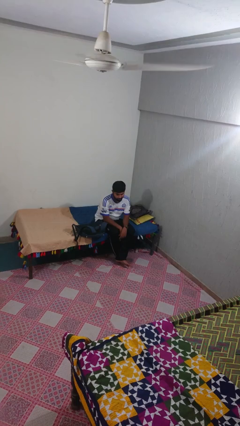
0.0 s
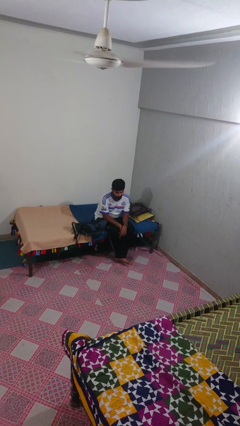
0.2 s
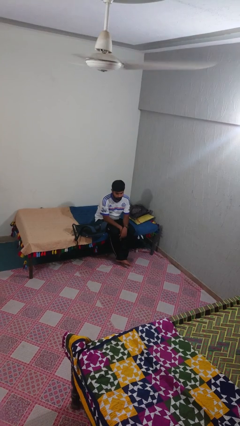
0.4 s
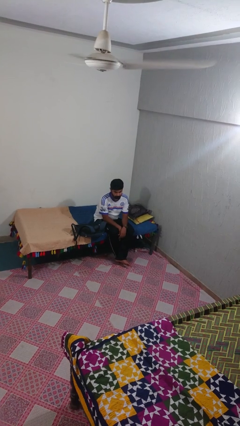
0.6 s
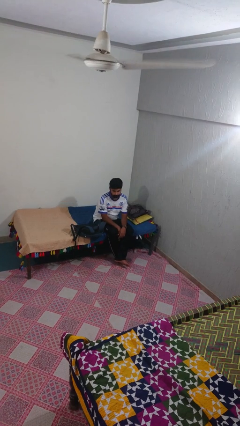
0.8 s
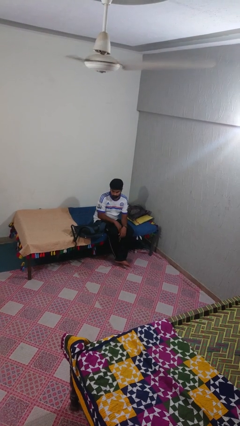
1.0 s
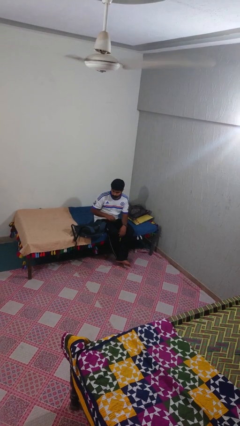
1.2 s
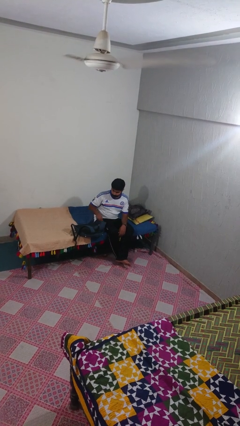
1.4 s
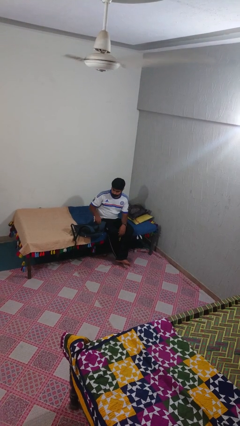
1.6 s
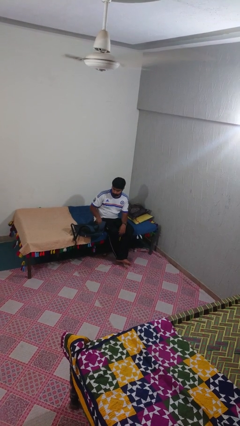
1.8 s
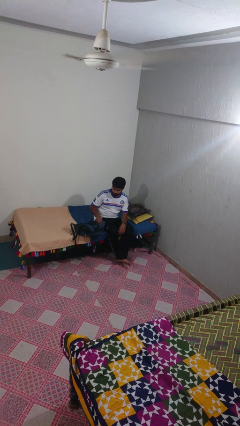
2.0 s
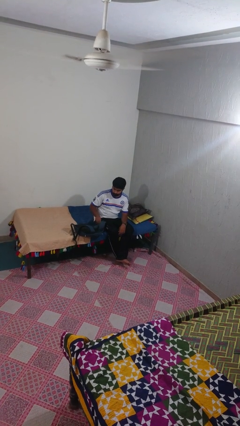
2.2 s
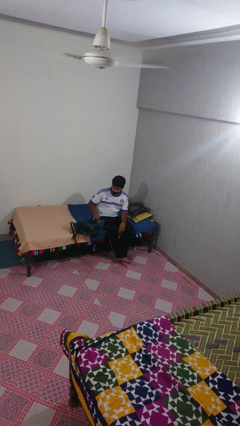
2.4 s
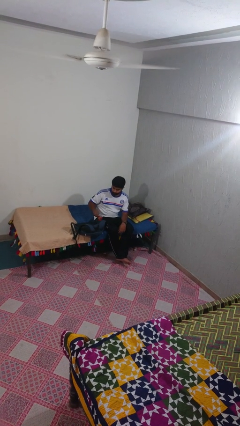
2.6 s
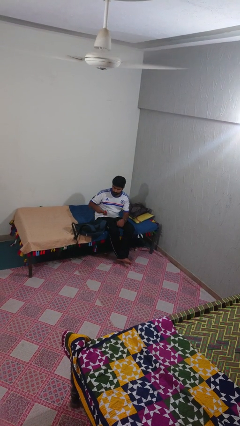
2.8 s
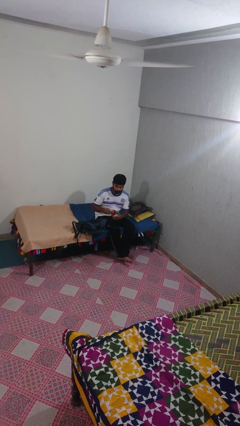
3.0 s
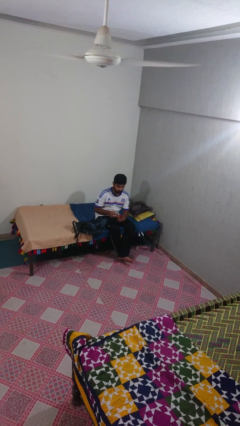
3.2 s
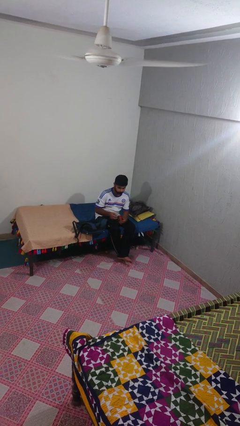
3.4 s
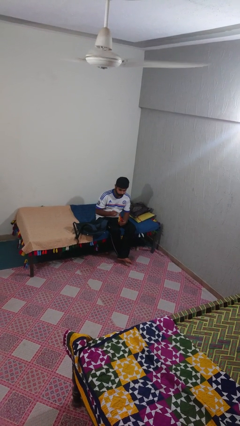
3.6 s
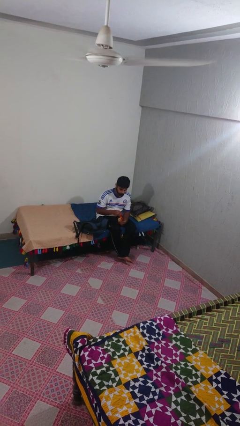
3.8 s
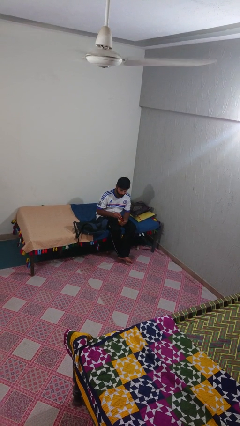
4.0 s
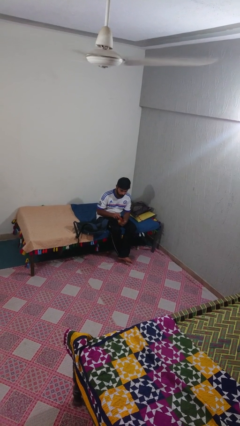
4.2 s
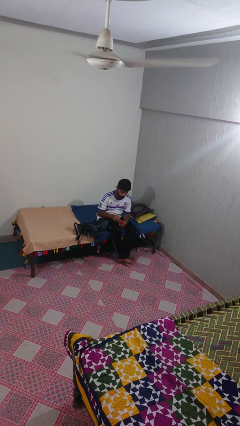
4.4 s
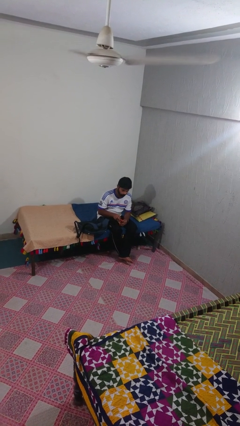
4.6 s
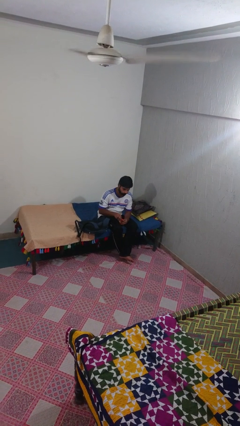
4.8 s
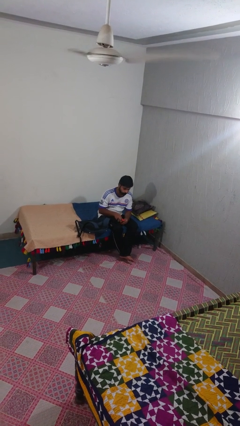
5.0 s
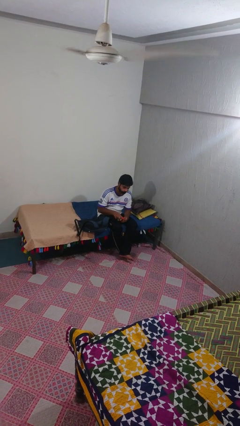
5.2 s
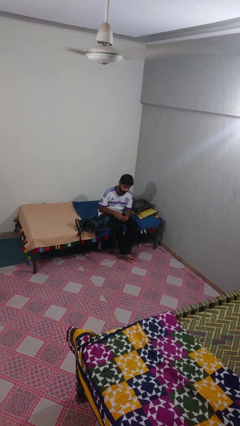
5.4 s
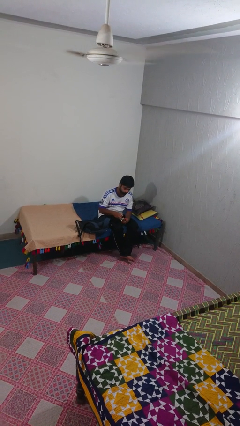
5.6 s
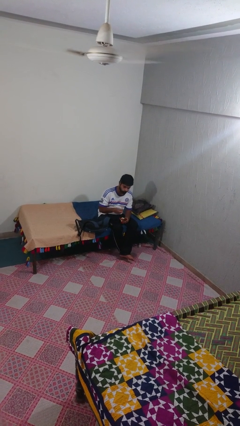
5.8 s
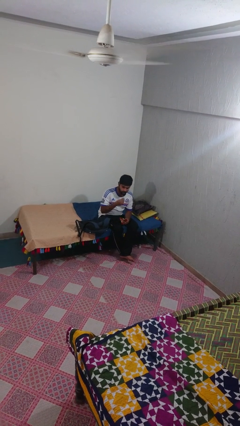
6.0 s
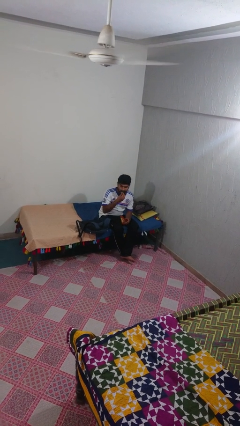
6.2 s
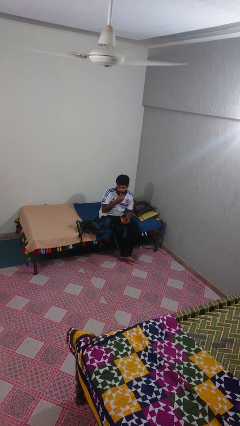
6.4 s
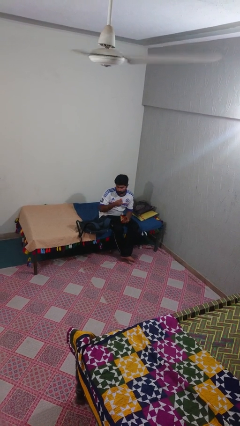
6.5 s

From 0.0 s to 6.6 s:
person eats snack from bag

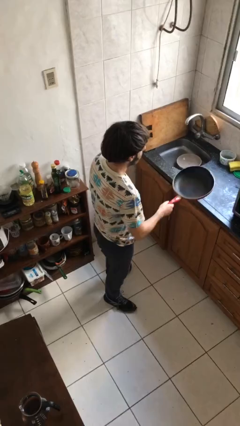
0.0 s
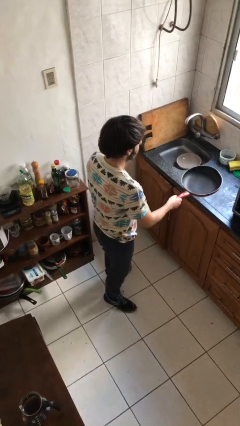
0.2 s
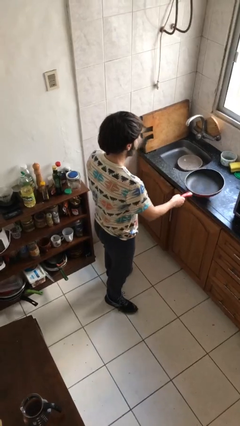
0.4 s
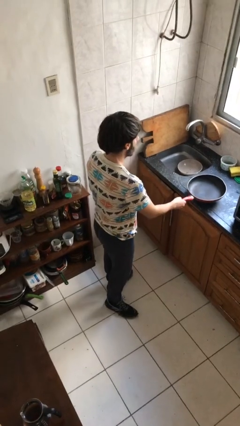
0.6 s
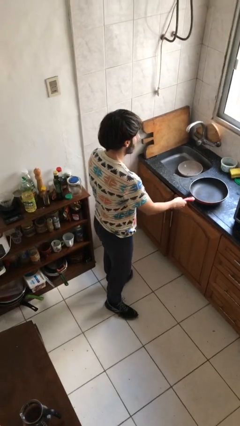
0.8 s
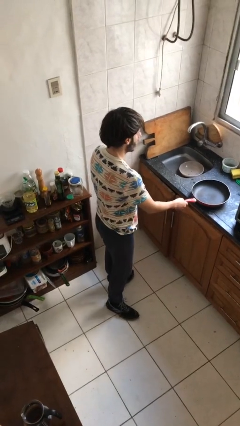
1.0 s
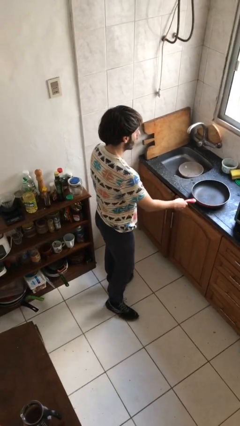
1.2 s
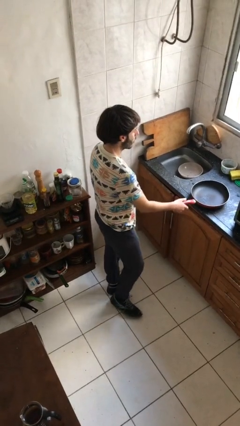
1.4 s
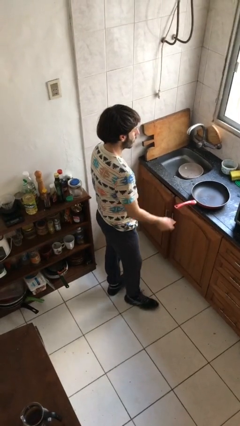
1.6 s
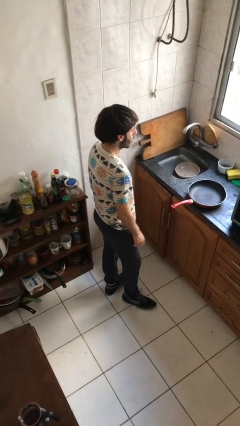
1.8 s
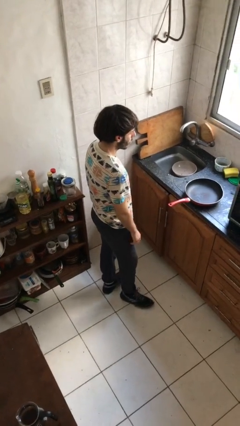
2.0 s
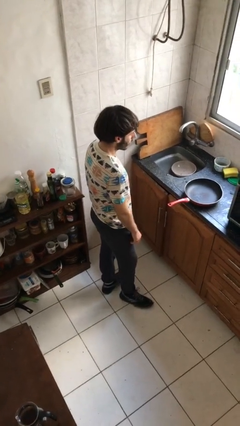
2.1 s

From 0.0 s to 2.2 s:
person puts down object on countertop

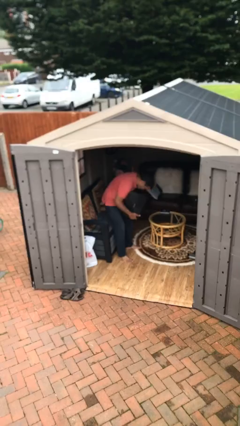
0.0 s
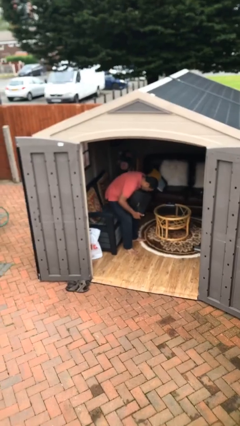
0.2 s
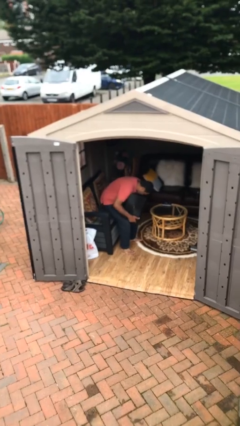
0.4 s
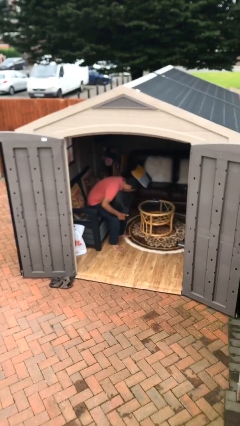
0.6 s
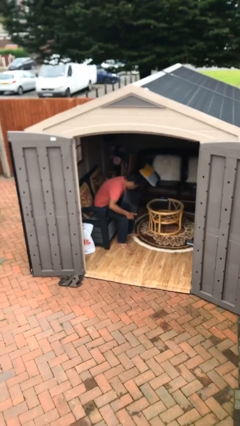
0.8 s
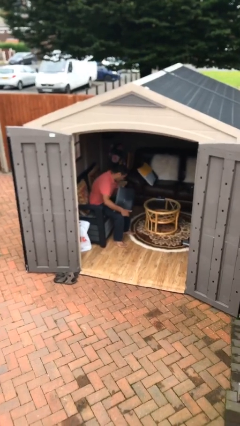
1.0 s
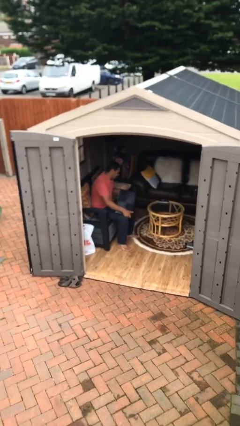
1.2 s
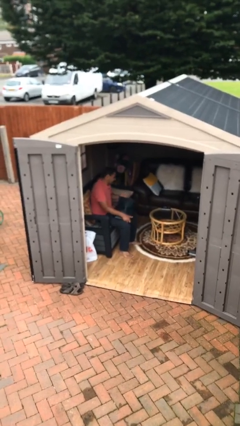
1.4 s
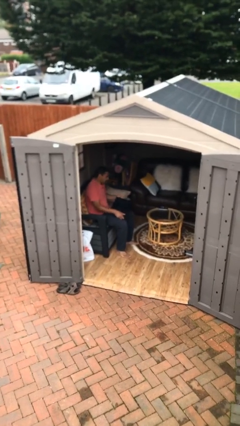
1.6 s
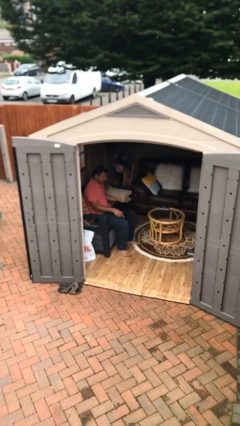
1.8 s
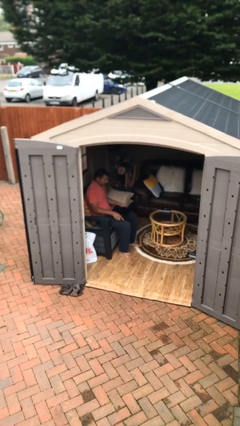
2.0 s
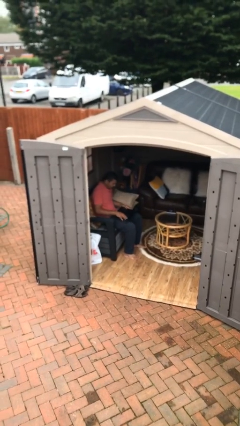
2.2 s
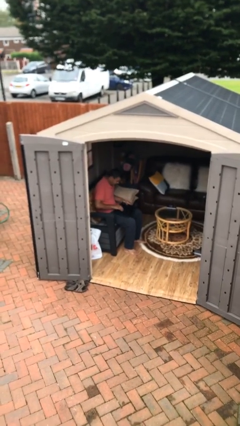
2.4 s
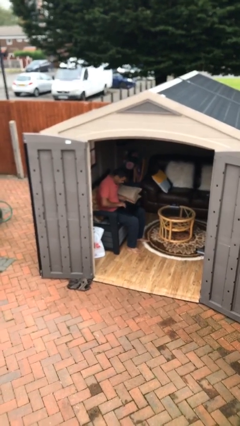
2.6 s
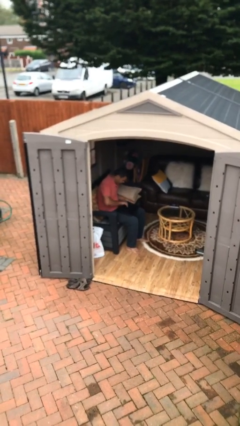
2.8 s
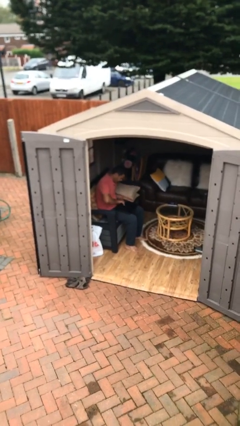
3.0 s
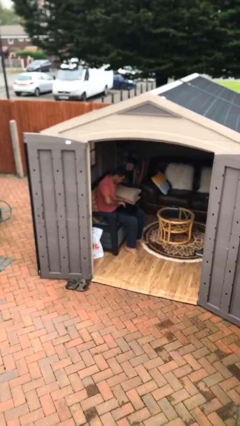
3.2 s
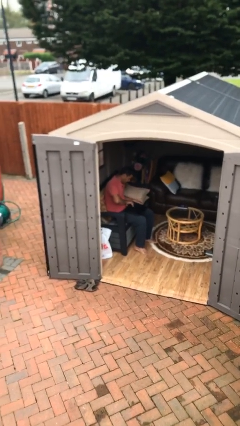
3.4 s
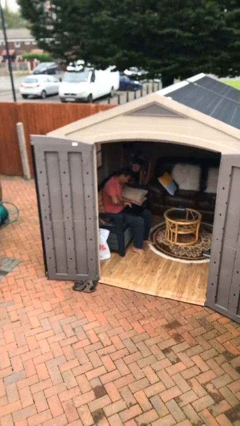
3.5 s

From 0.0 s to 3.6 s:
person sits down

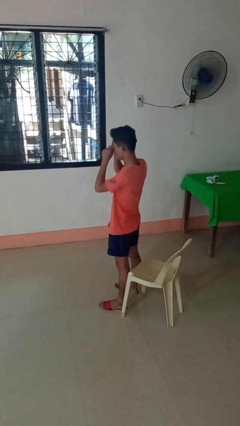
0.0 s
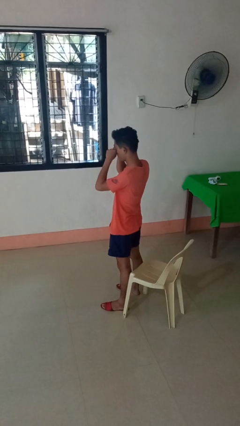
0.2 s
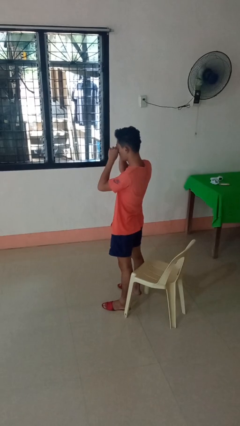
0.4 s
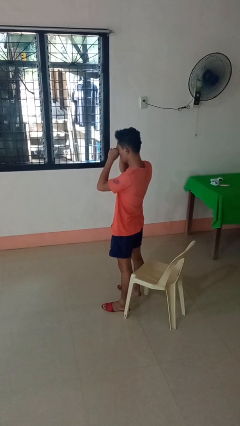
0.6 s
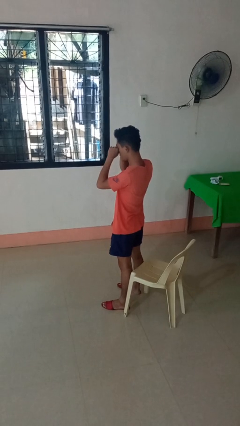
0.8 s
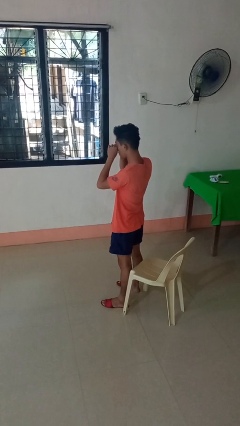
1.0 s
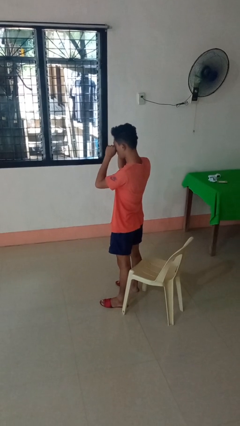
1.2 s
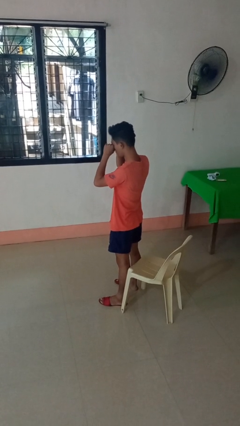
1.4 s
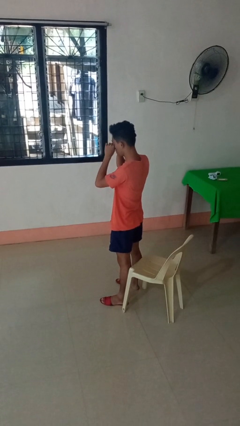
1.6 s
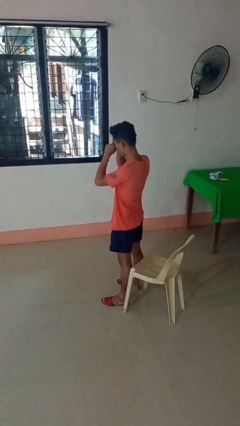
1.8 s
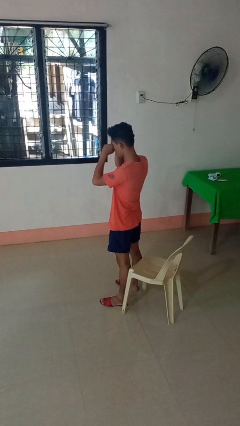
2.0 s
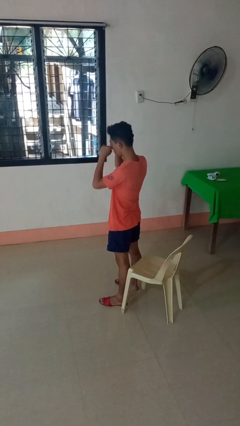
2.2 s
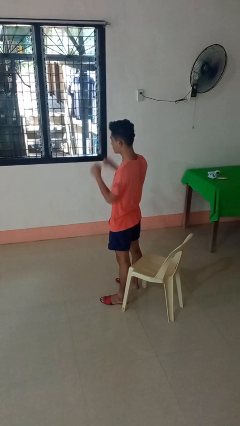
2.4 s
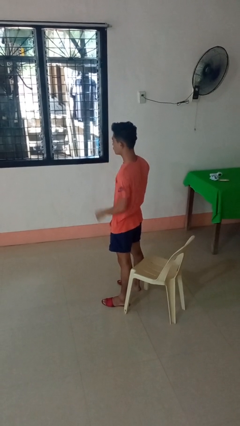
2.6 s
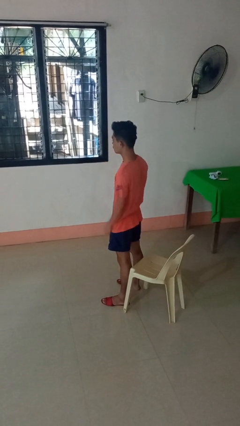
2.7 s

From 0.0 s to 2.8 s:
person rubs eyes

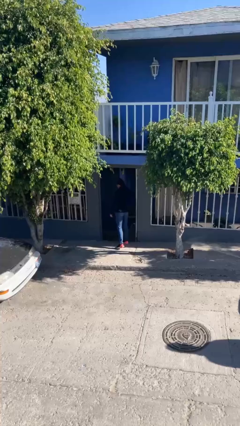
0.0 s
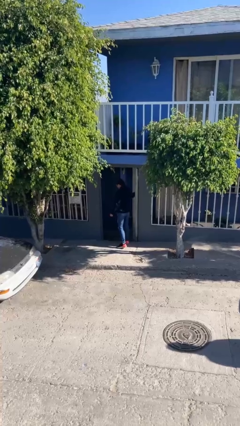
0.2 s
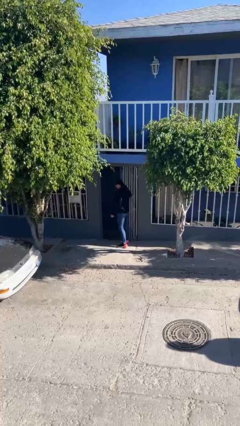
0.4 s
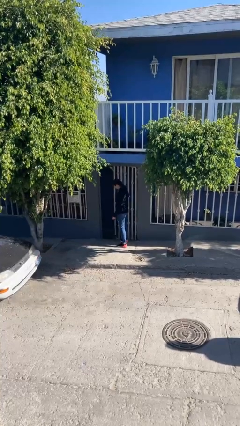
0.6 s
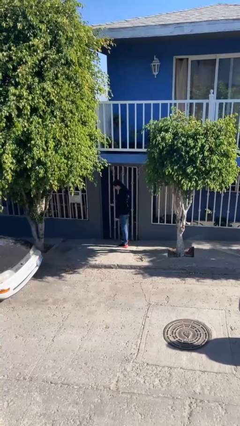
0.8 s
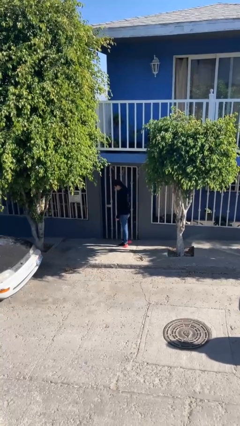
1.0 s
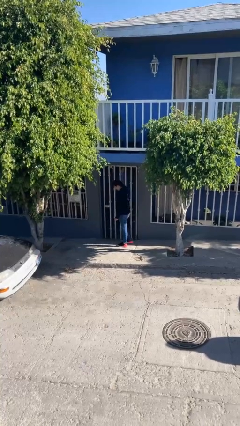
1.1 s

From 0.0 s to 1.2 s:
person closes facility door

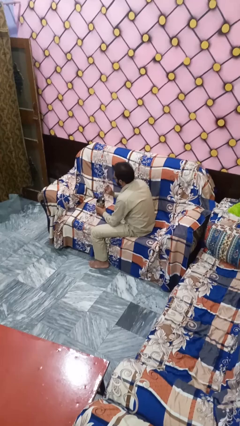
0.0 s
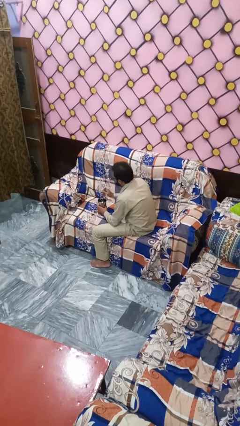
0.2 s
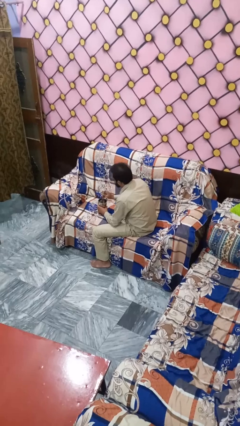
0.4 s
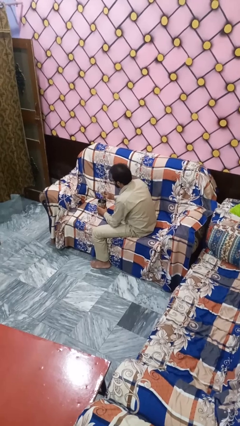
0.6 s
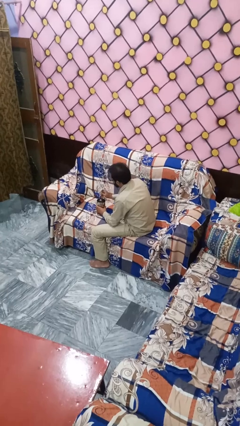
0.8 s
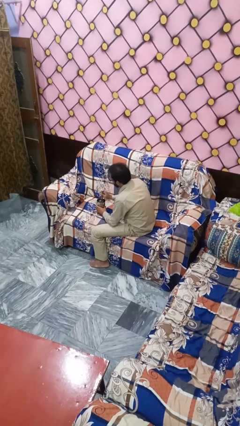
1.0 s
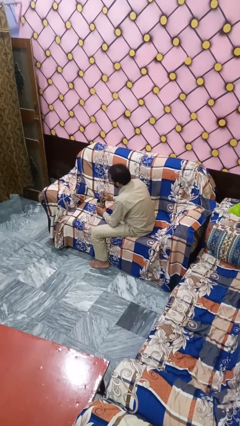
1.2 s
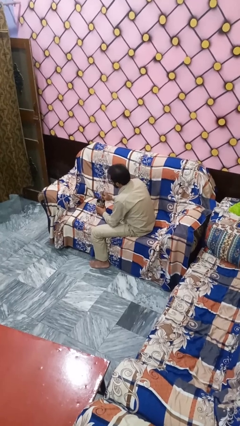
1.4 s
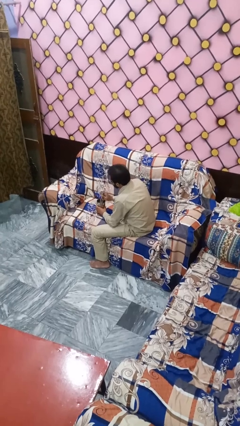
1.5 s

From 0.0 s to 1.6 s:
person stirs mug
